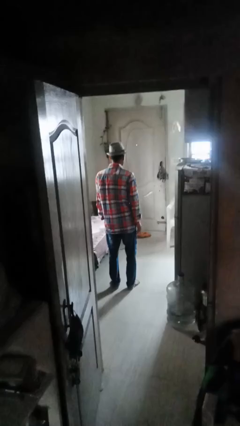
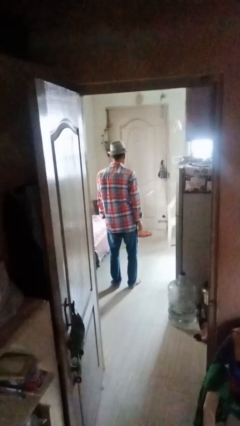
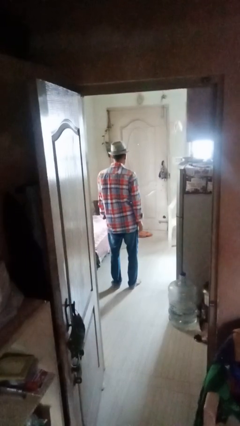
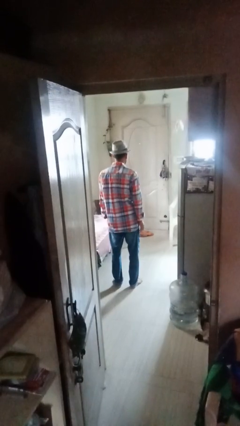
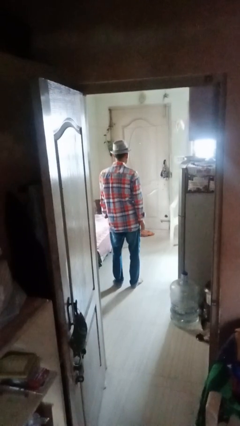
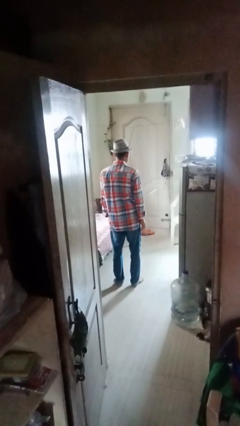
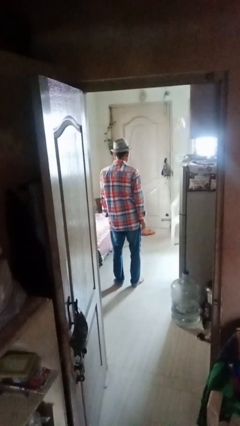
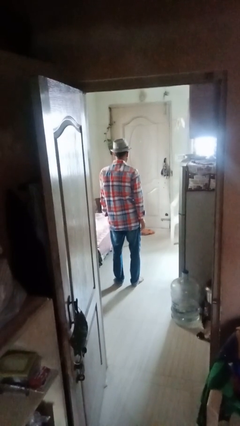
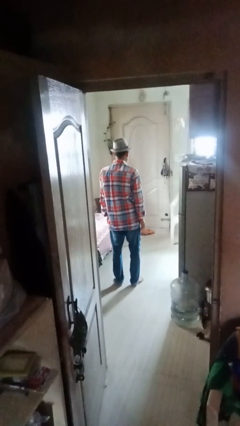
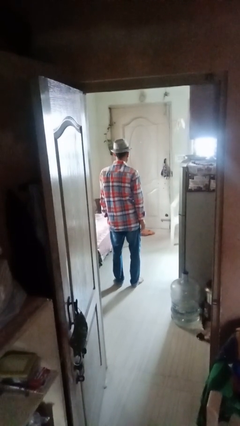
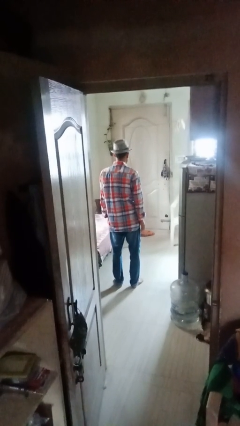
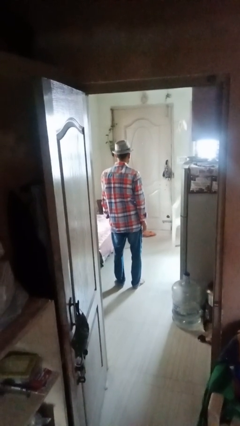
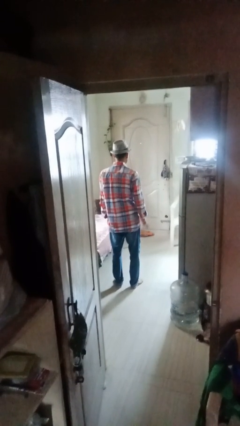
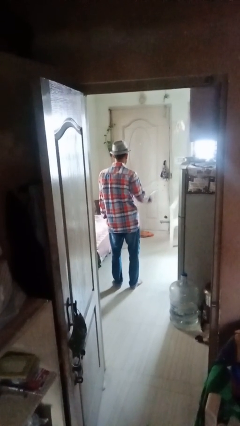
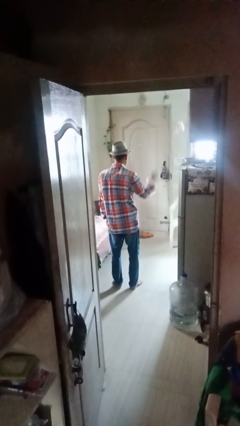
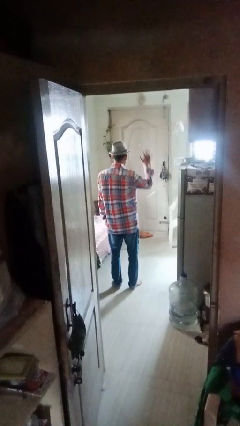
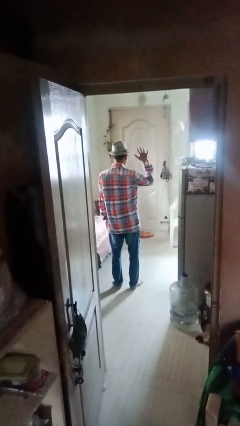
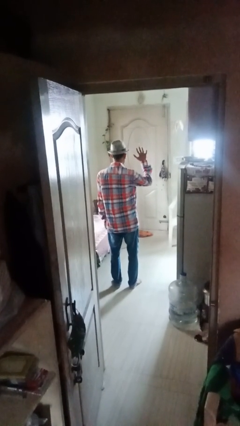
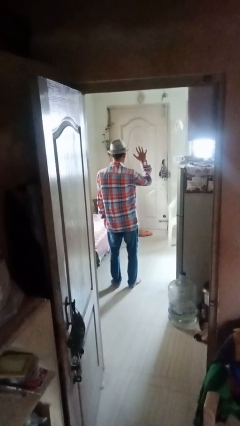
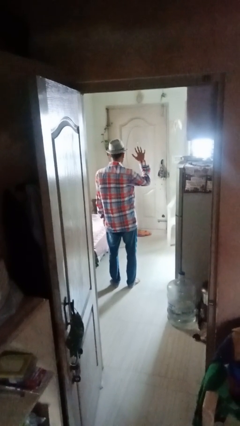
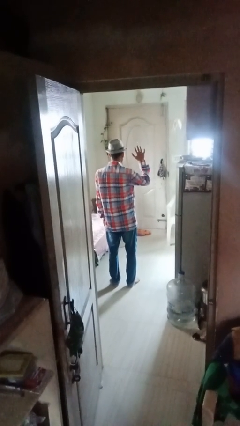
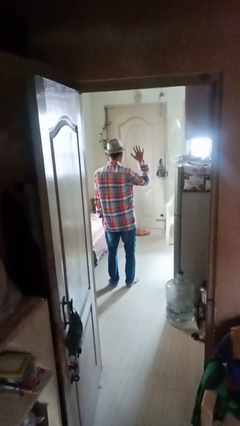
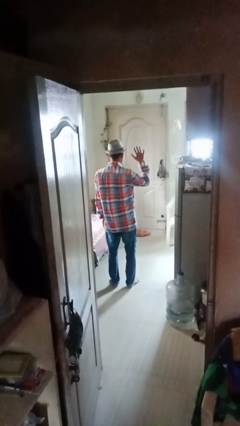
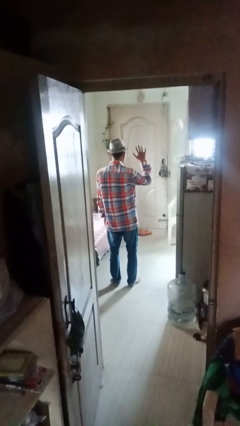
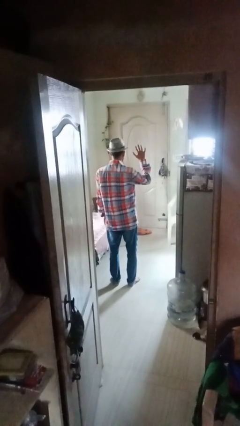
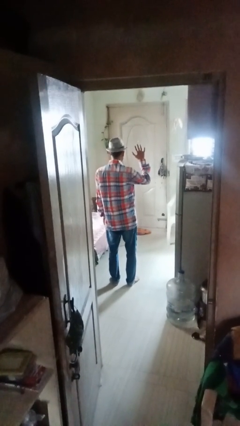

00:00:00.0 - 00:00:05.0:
person gestures number five

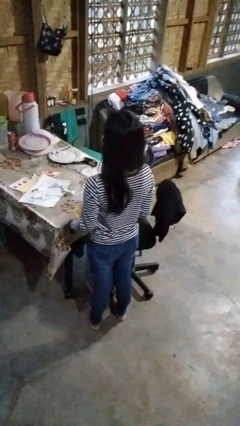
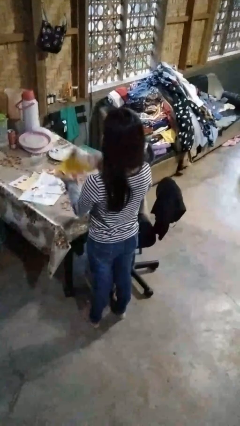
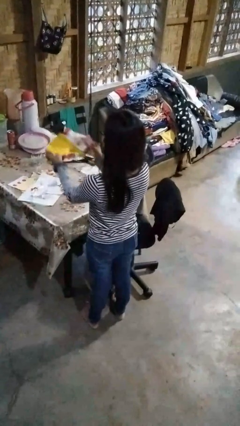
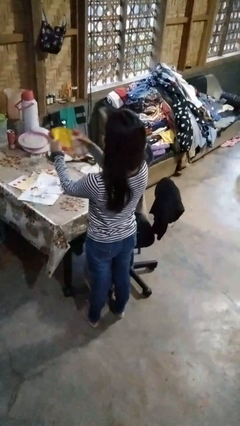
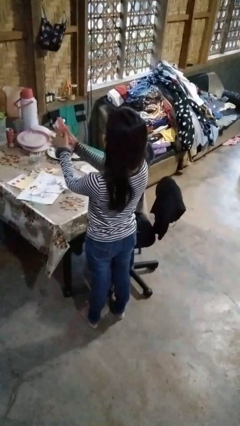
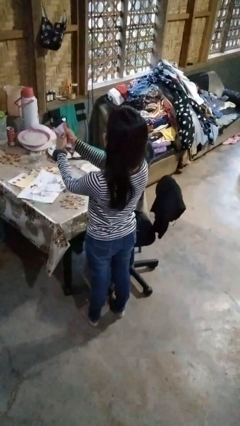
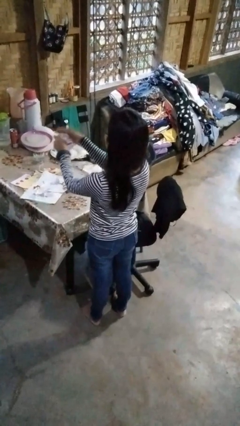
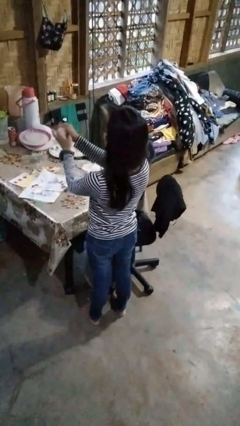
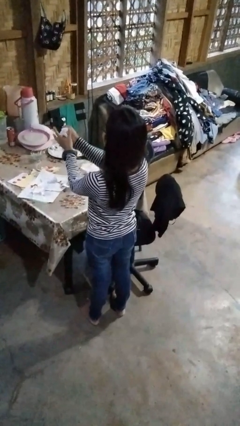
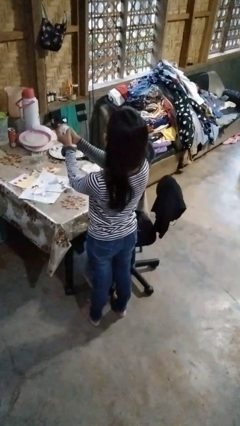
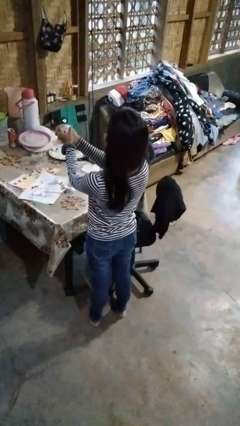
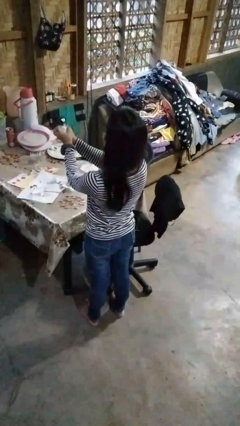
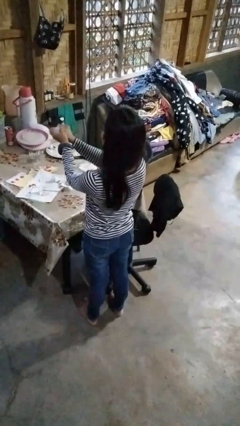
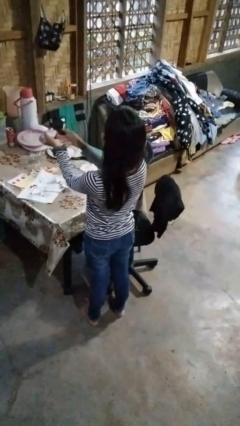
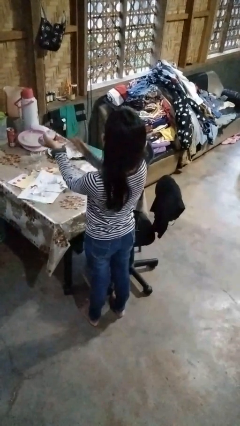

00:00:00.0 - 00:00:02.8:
person crumples paper

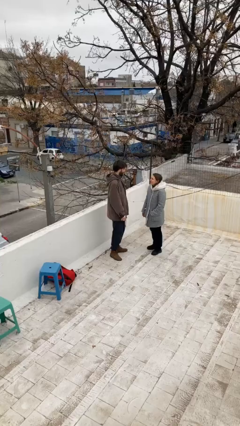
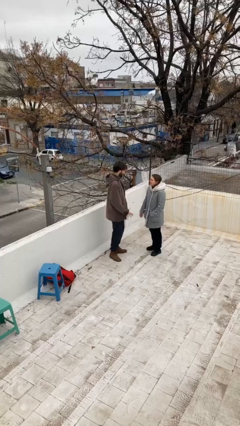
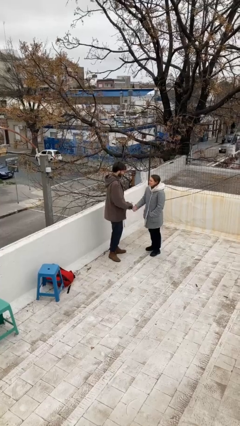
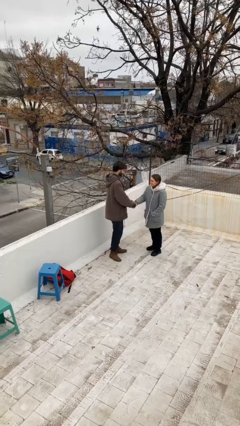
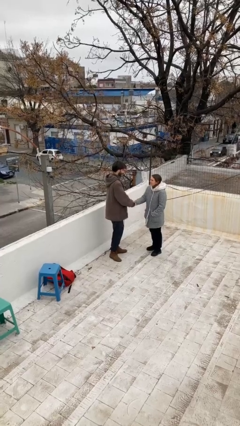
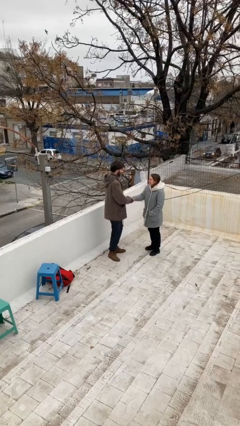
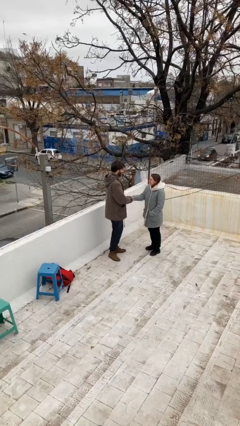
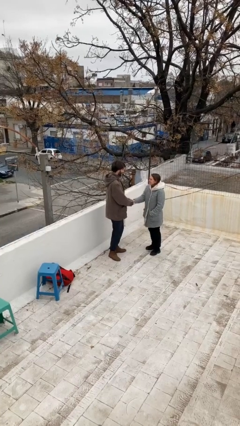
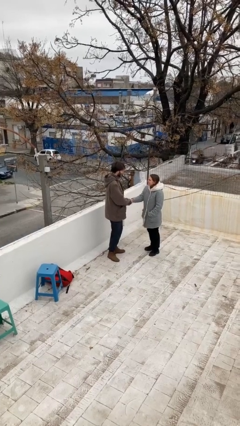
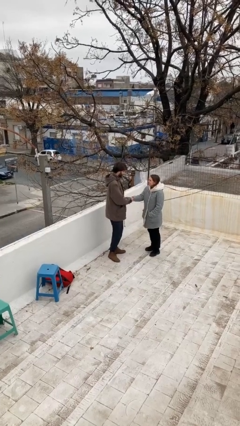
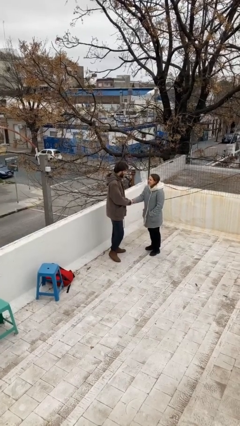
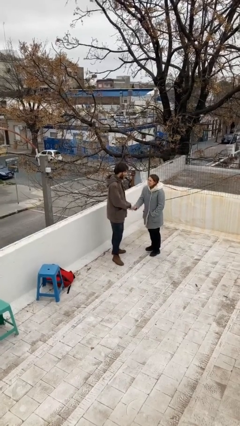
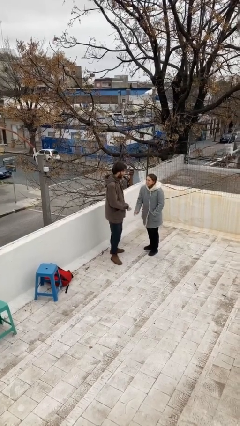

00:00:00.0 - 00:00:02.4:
person shakes hand

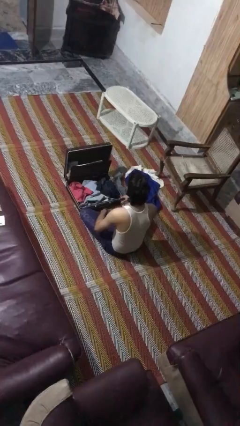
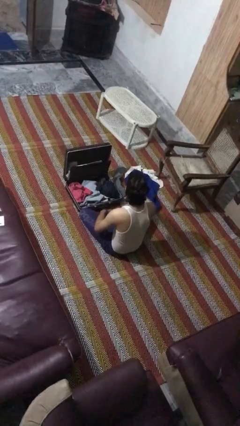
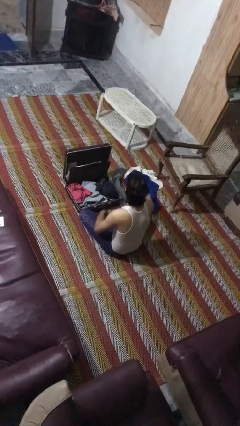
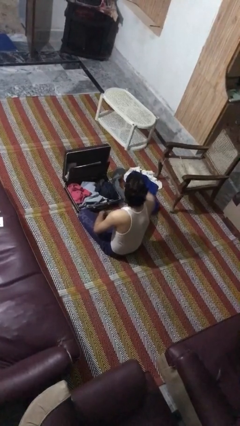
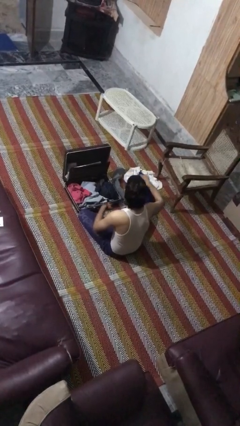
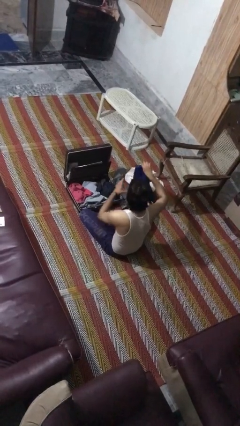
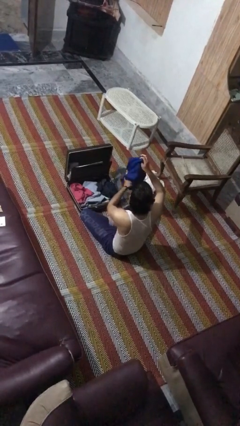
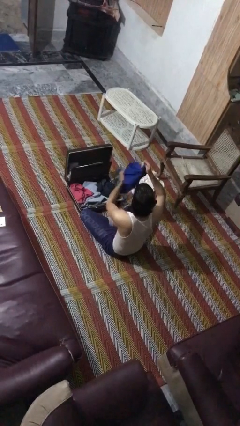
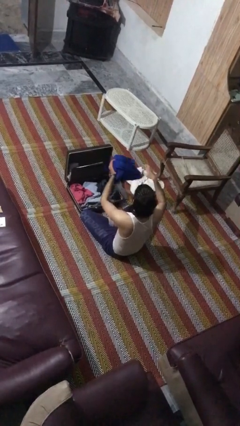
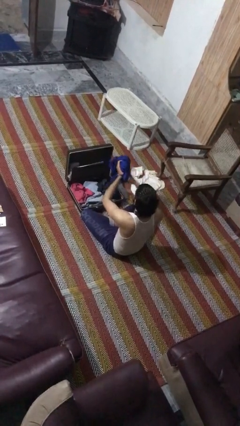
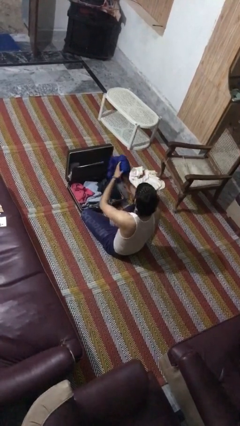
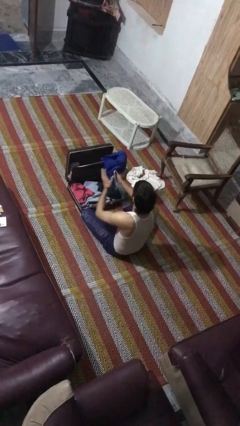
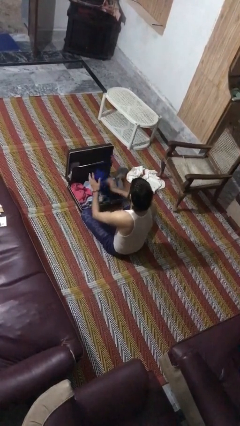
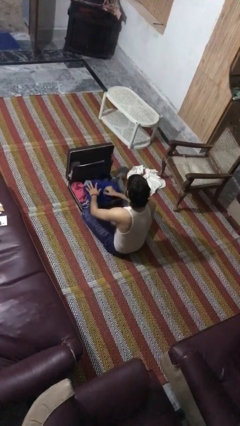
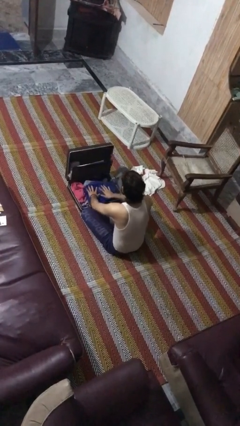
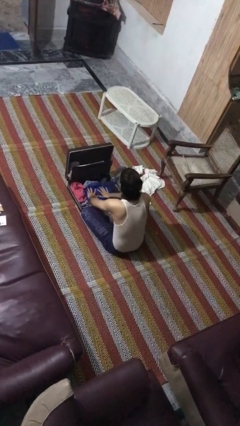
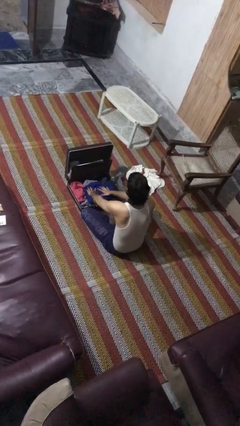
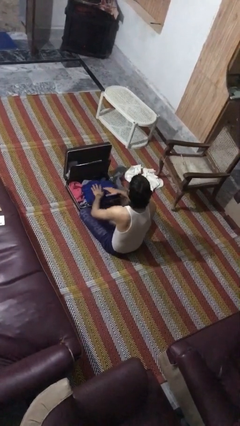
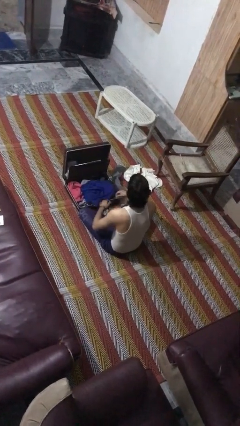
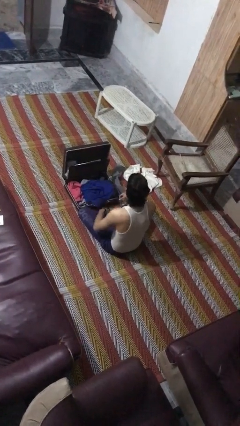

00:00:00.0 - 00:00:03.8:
person loads clothes into suitcase

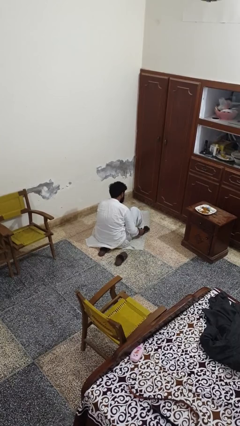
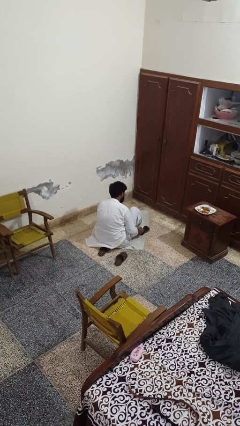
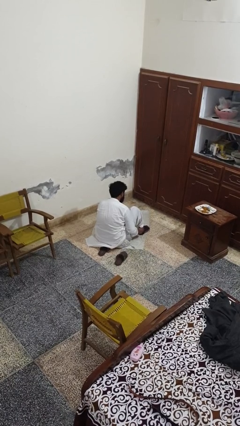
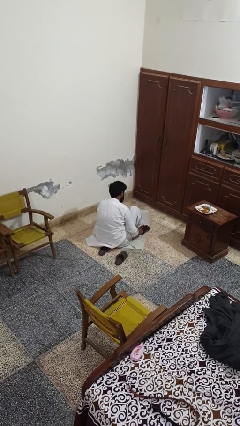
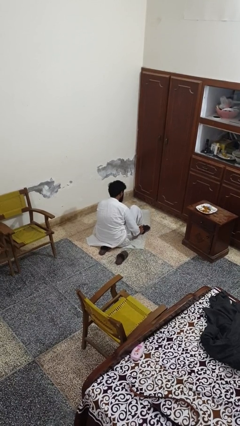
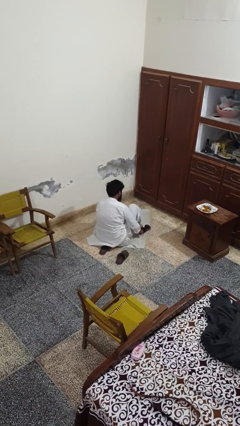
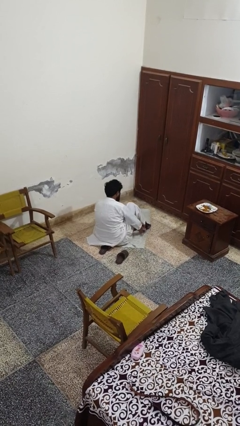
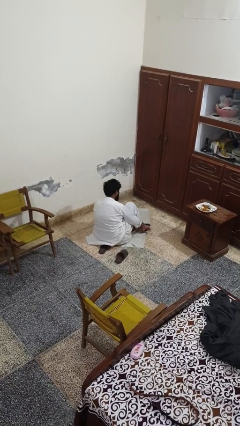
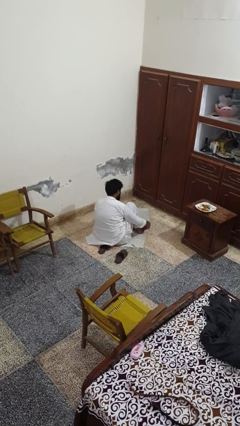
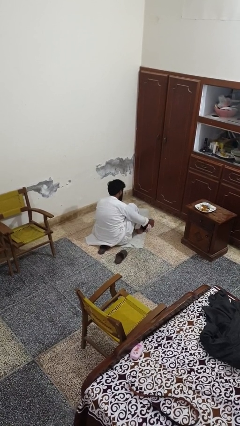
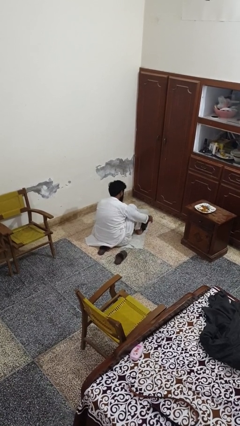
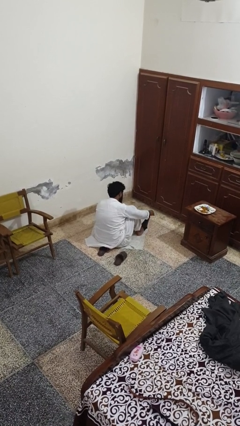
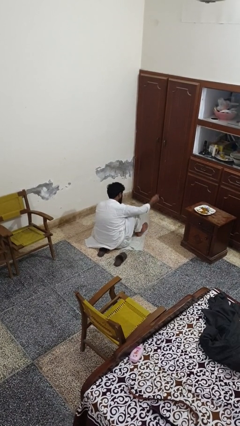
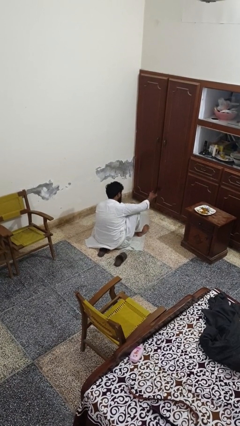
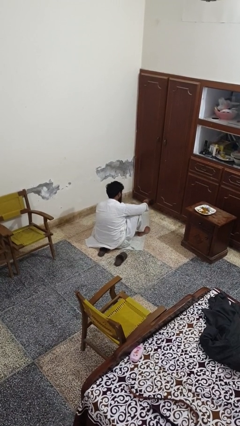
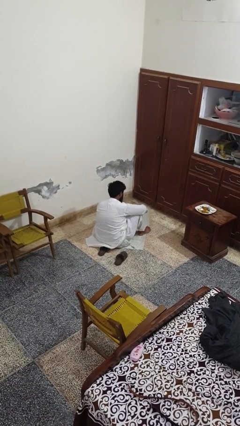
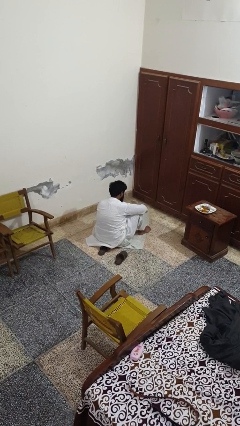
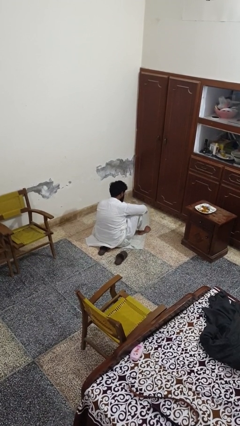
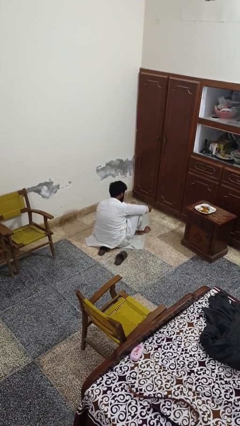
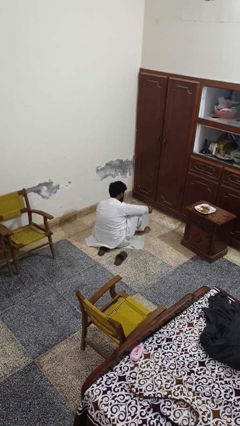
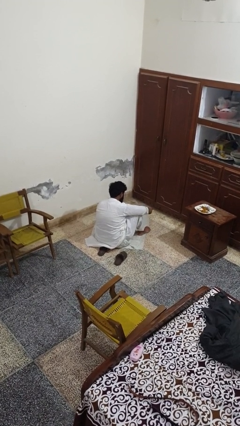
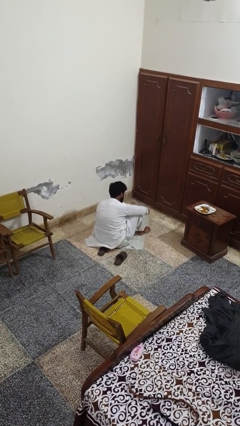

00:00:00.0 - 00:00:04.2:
person takes off socks
